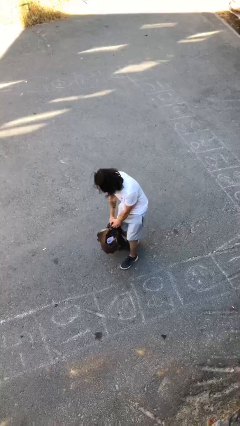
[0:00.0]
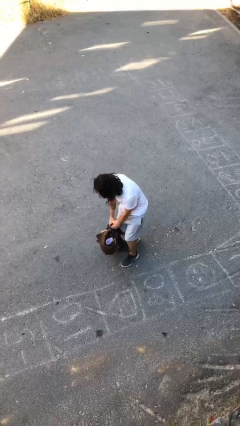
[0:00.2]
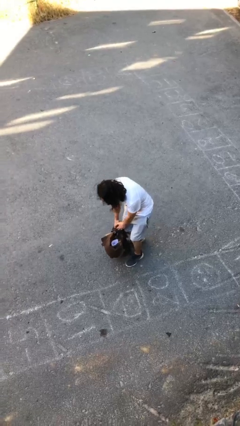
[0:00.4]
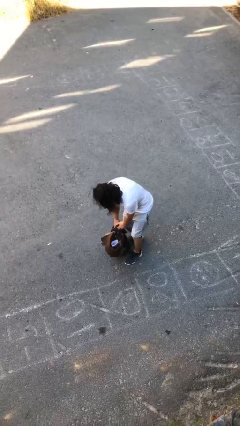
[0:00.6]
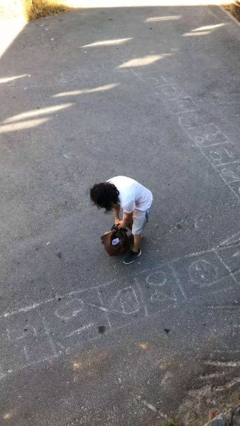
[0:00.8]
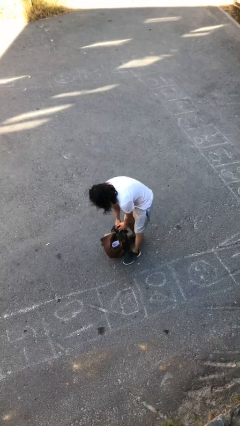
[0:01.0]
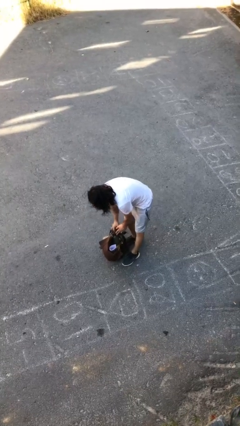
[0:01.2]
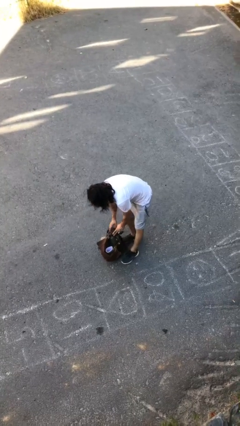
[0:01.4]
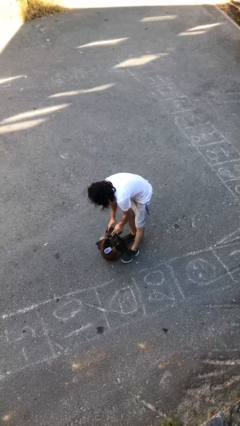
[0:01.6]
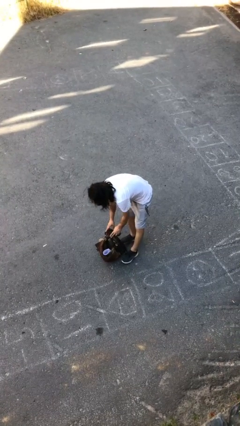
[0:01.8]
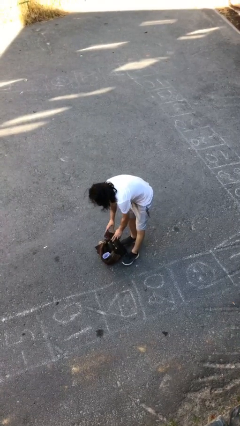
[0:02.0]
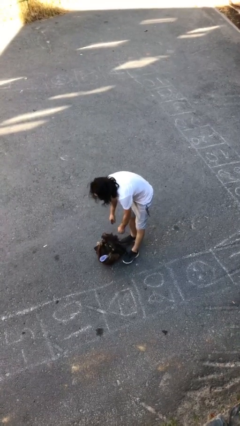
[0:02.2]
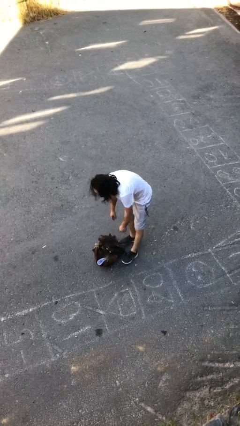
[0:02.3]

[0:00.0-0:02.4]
person puts down object on floor

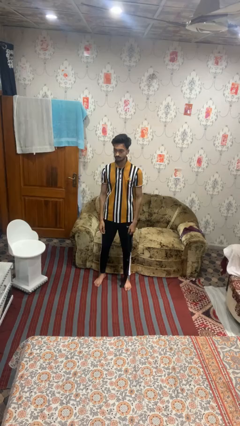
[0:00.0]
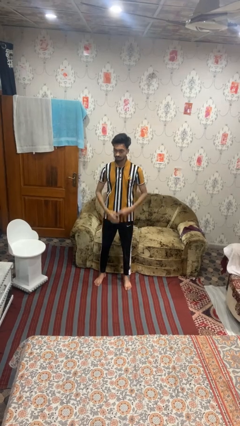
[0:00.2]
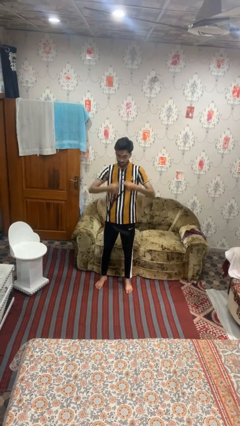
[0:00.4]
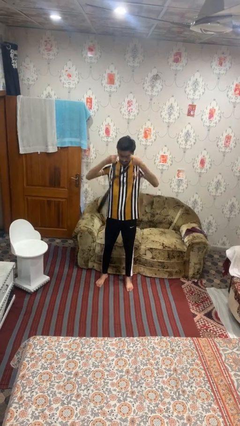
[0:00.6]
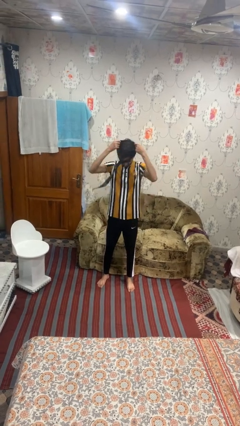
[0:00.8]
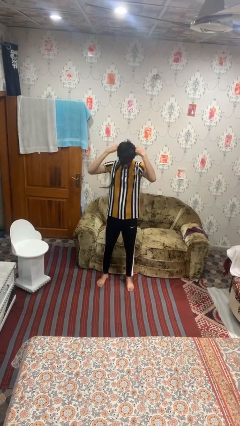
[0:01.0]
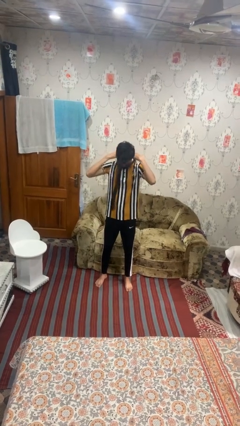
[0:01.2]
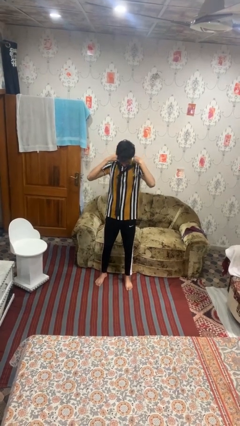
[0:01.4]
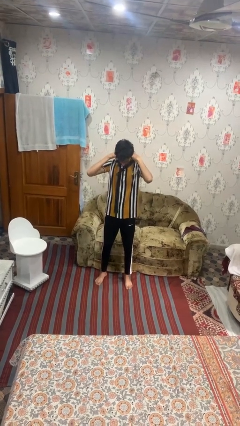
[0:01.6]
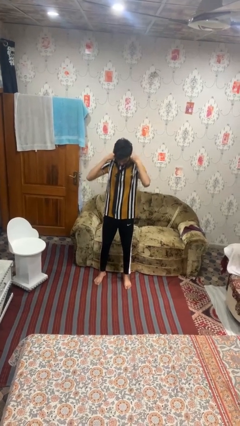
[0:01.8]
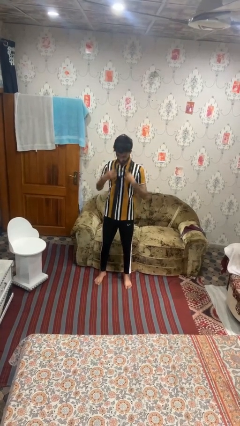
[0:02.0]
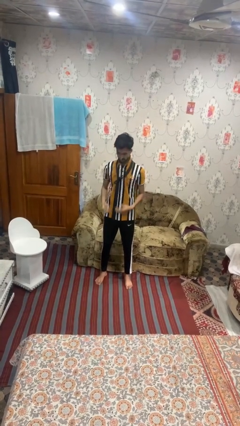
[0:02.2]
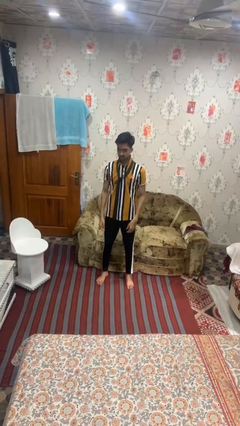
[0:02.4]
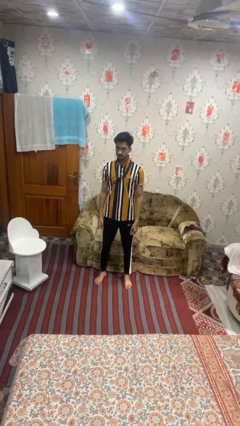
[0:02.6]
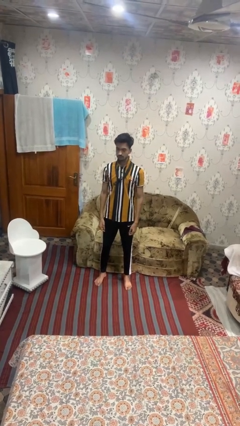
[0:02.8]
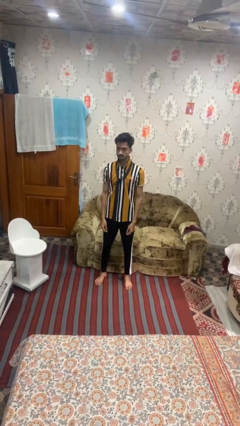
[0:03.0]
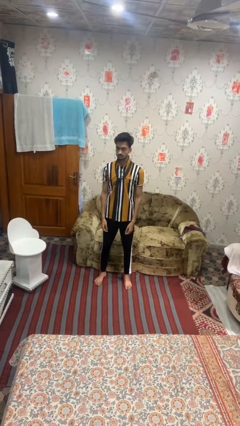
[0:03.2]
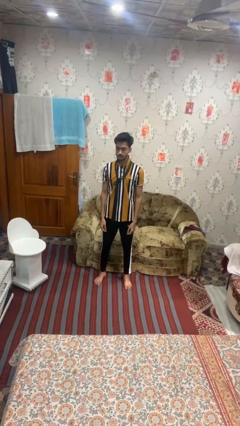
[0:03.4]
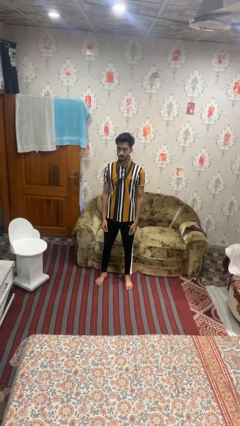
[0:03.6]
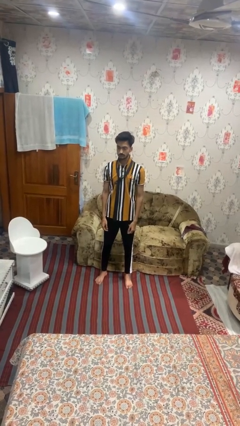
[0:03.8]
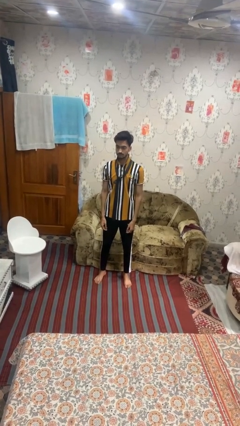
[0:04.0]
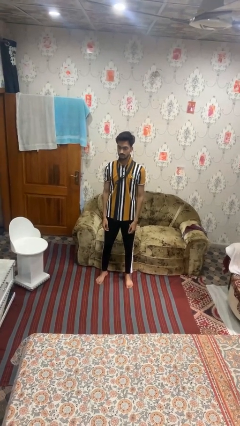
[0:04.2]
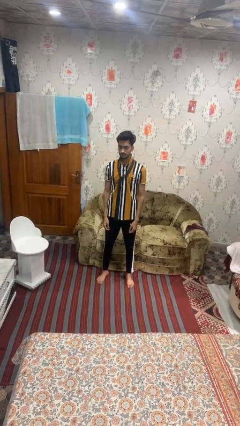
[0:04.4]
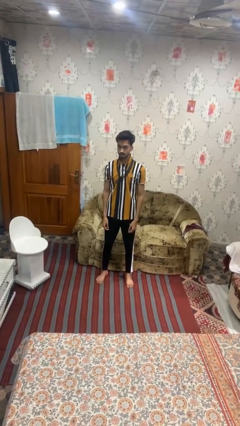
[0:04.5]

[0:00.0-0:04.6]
person puts on necktie

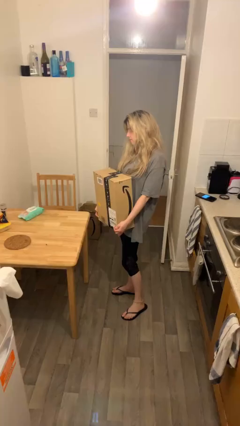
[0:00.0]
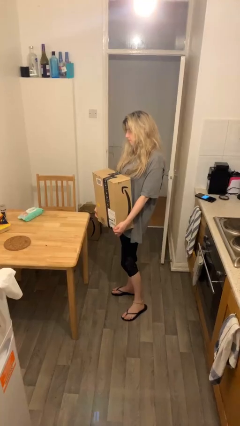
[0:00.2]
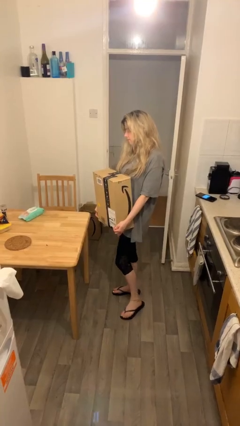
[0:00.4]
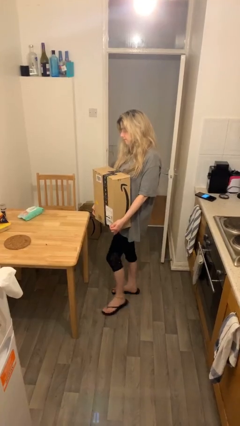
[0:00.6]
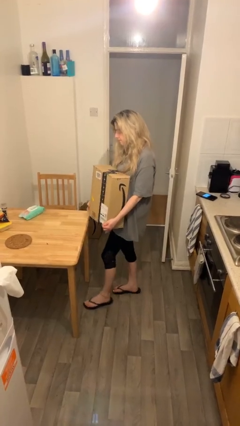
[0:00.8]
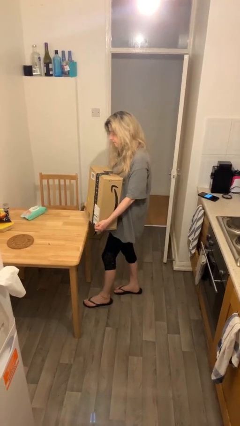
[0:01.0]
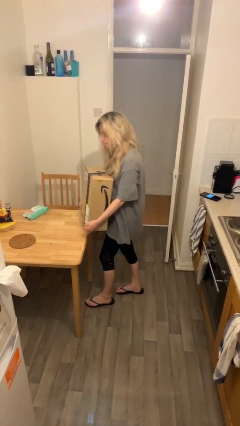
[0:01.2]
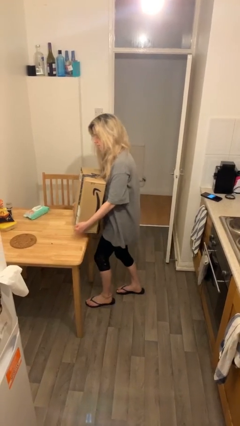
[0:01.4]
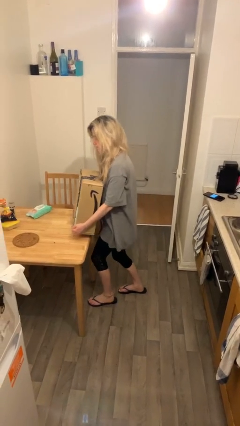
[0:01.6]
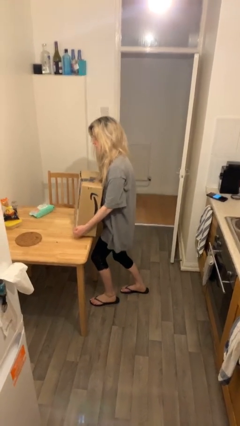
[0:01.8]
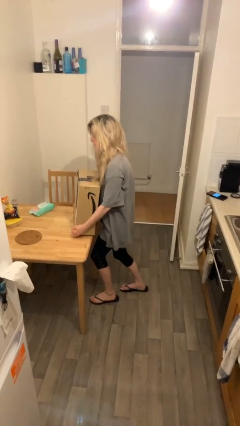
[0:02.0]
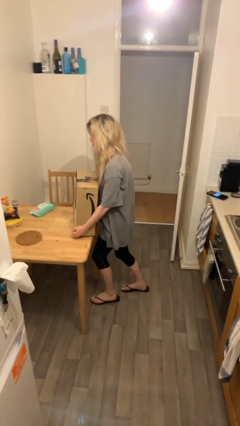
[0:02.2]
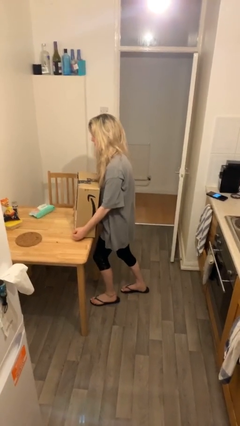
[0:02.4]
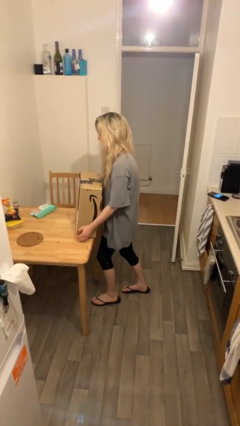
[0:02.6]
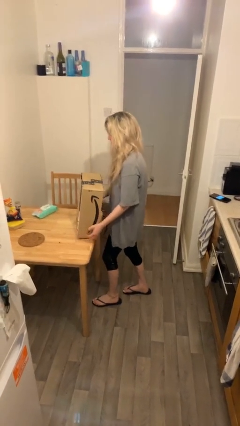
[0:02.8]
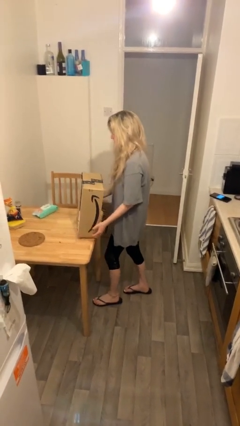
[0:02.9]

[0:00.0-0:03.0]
person puts down object on table

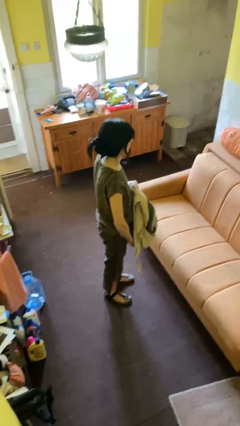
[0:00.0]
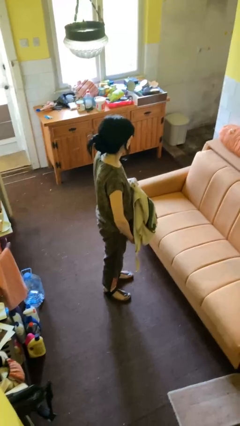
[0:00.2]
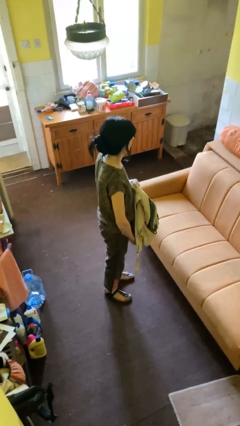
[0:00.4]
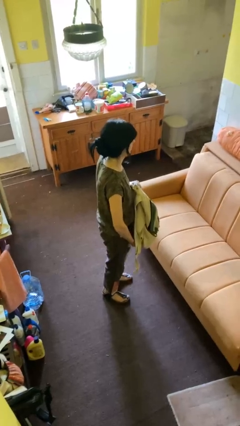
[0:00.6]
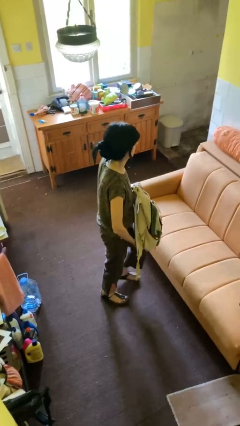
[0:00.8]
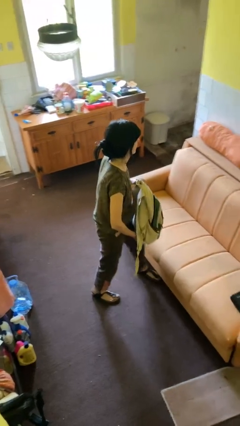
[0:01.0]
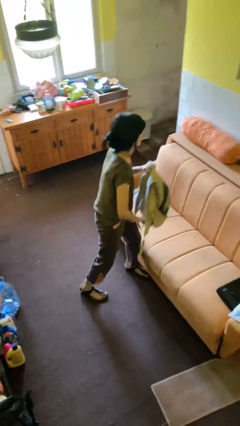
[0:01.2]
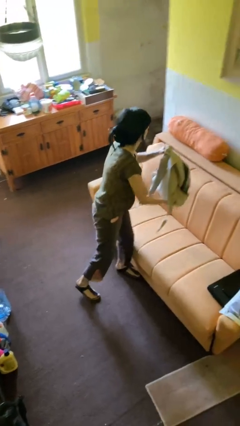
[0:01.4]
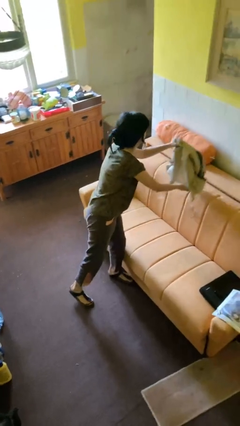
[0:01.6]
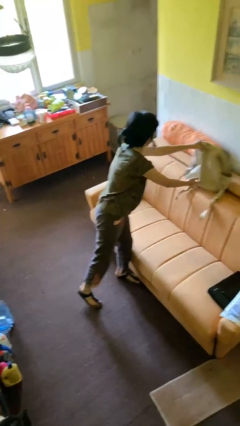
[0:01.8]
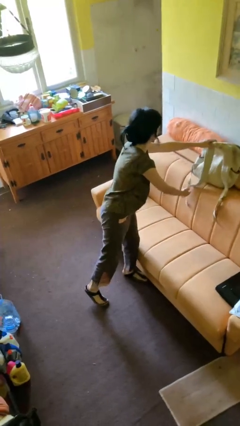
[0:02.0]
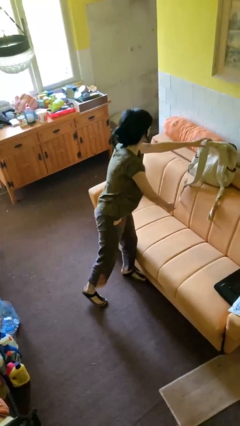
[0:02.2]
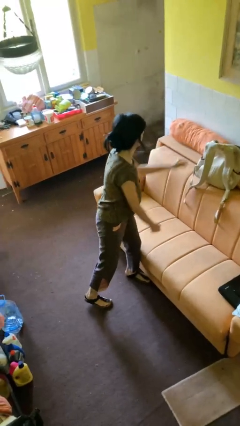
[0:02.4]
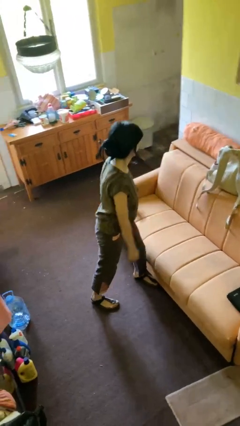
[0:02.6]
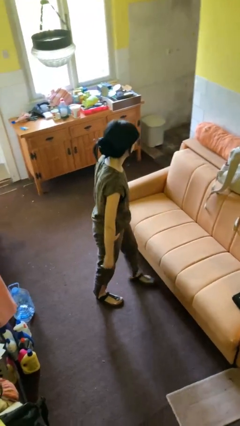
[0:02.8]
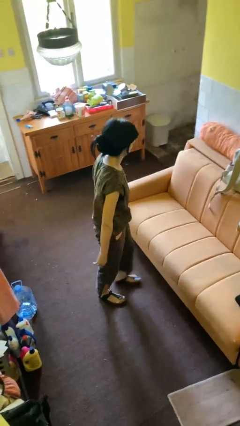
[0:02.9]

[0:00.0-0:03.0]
person puts down object on couch

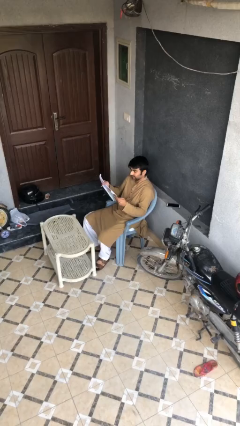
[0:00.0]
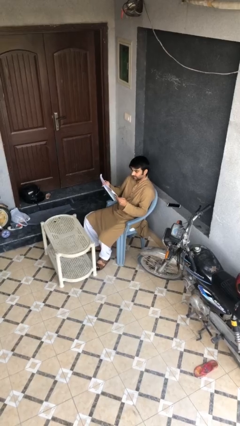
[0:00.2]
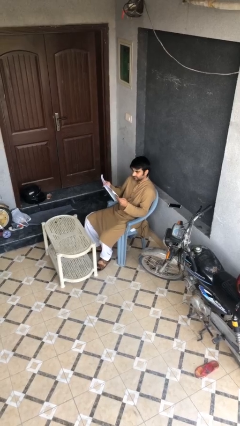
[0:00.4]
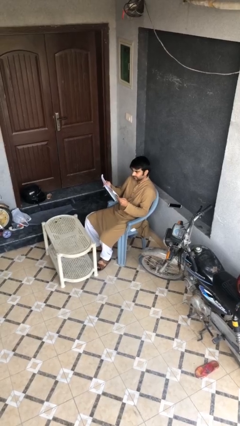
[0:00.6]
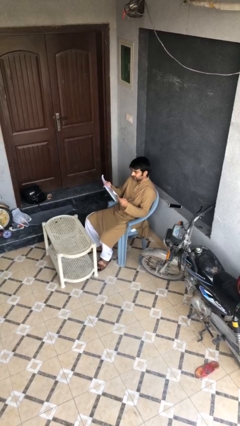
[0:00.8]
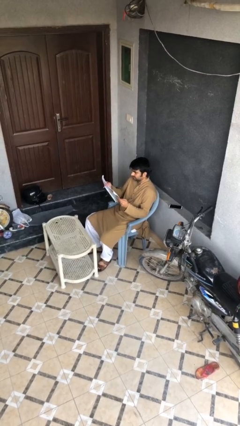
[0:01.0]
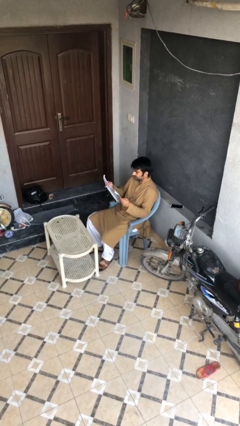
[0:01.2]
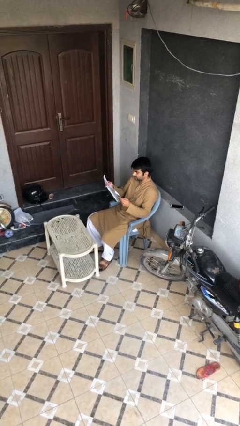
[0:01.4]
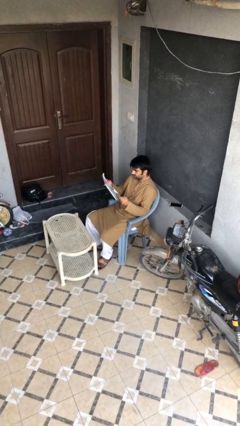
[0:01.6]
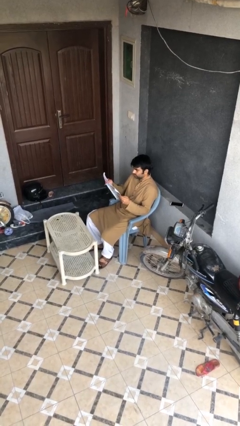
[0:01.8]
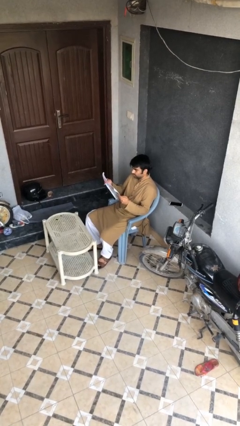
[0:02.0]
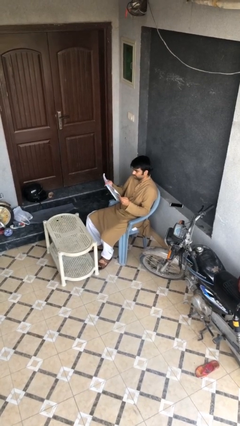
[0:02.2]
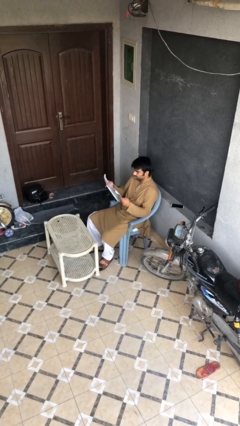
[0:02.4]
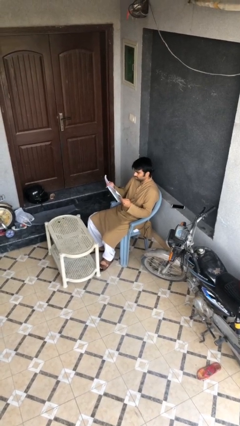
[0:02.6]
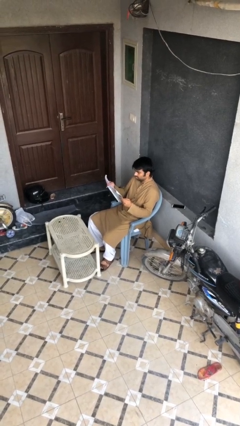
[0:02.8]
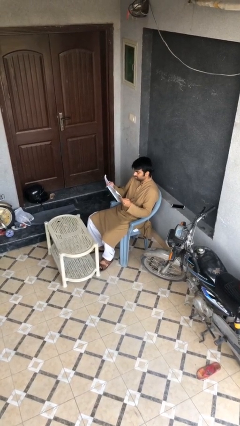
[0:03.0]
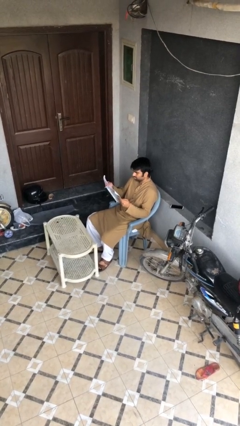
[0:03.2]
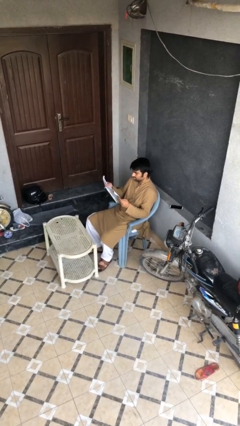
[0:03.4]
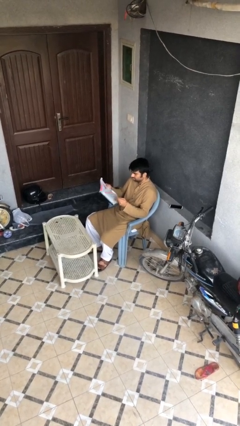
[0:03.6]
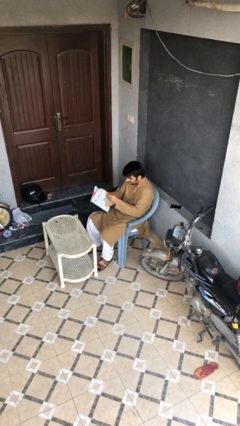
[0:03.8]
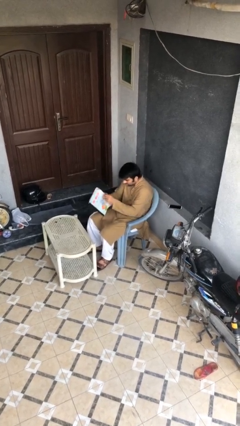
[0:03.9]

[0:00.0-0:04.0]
person reads document

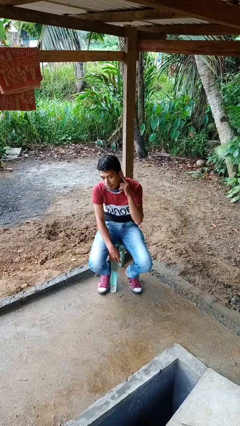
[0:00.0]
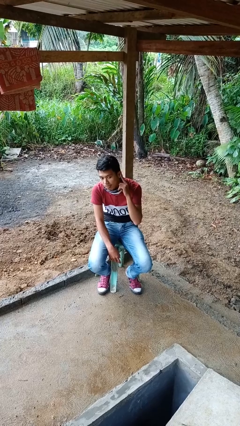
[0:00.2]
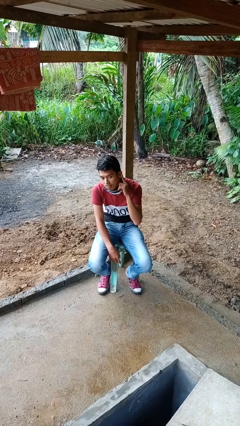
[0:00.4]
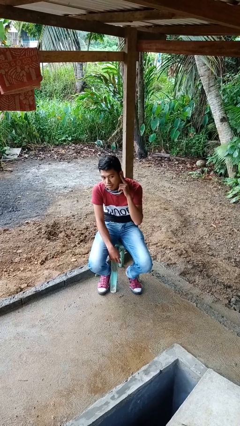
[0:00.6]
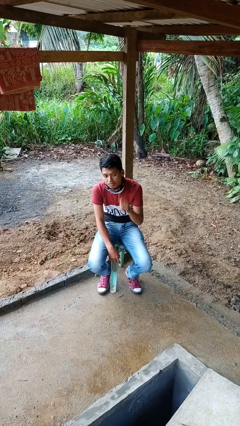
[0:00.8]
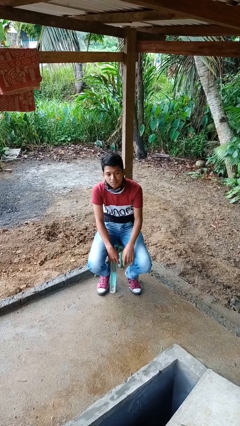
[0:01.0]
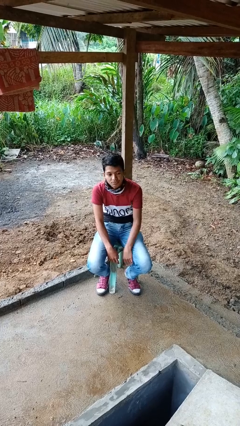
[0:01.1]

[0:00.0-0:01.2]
person gestures listen closely
